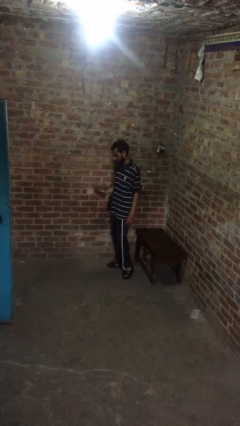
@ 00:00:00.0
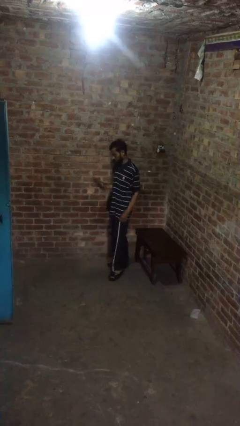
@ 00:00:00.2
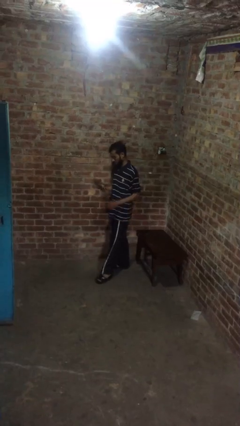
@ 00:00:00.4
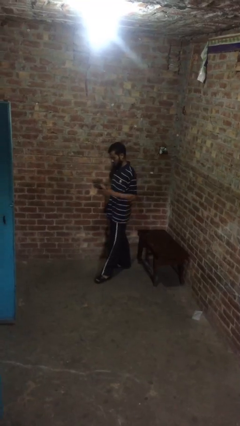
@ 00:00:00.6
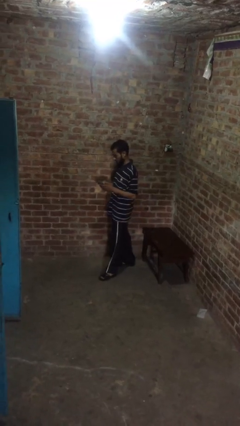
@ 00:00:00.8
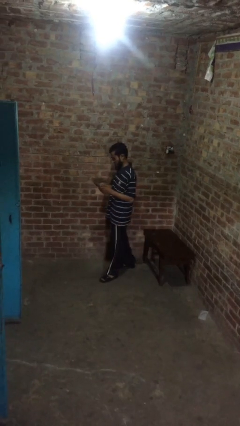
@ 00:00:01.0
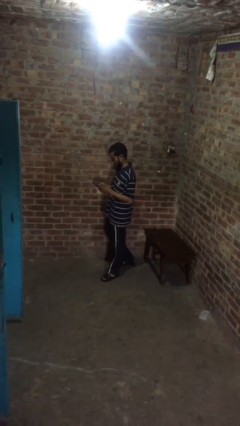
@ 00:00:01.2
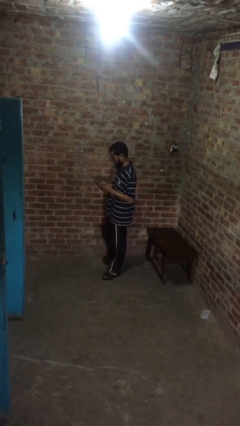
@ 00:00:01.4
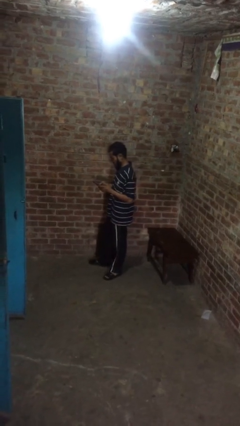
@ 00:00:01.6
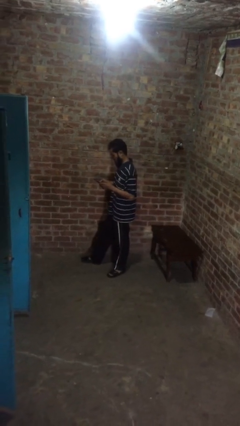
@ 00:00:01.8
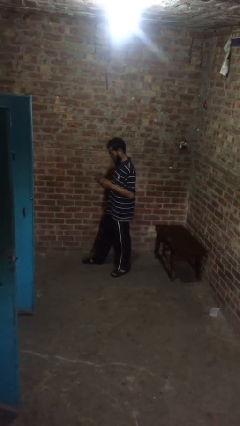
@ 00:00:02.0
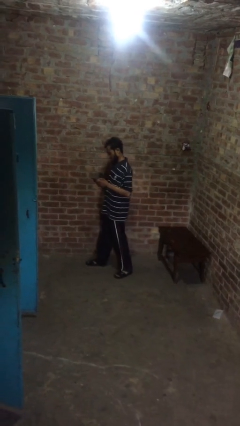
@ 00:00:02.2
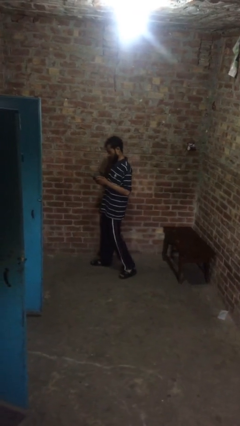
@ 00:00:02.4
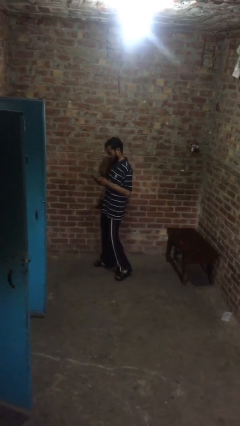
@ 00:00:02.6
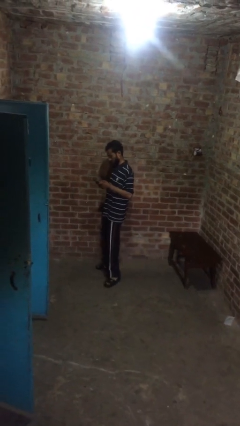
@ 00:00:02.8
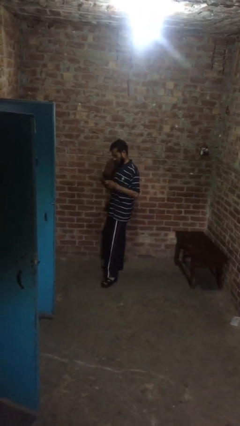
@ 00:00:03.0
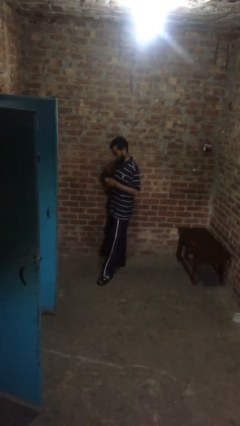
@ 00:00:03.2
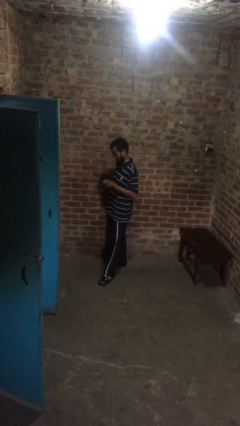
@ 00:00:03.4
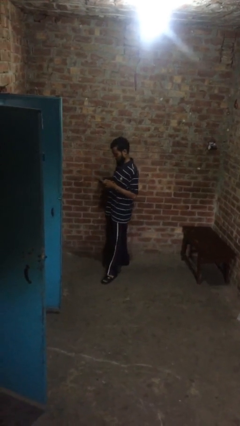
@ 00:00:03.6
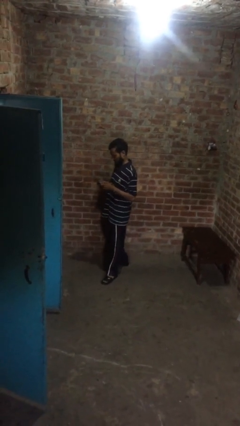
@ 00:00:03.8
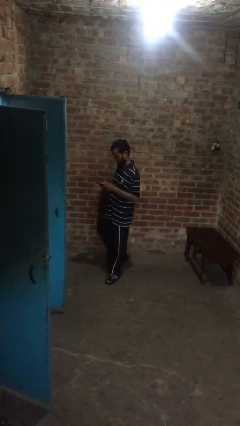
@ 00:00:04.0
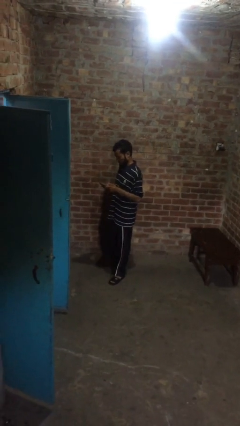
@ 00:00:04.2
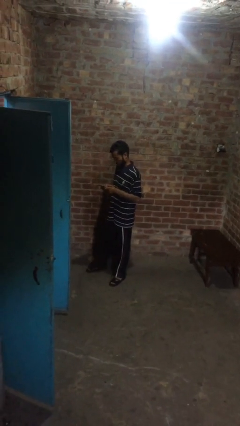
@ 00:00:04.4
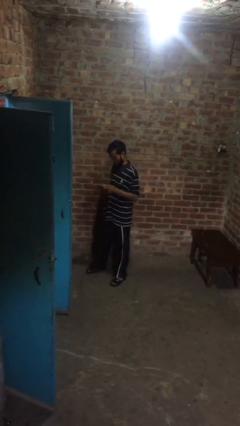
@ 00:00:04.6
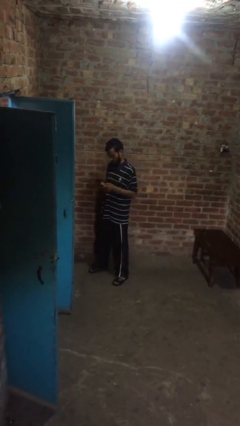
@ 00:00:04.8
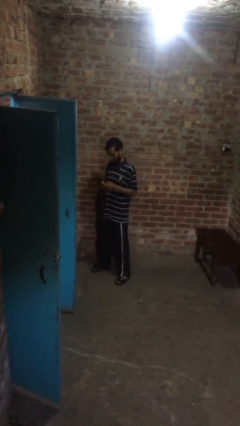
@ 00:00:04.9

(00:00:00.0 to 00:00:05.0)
person texts on phone

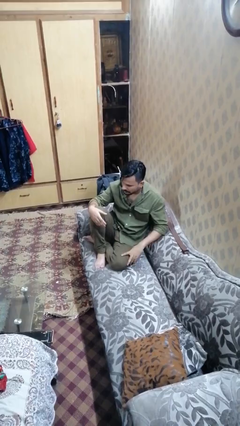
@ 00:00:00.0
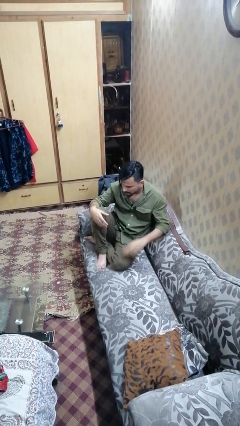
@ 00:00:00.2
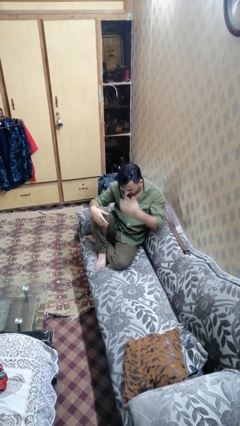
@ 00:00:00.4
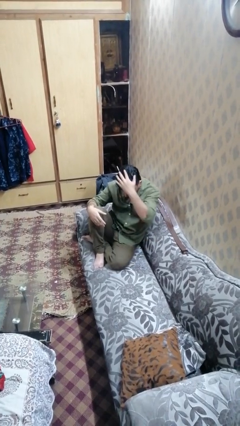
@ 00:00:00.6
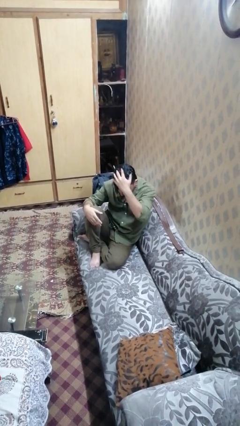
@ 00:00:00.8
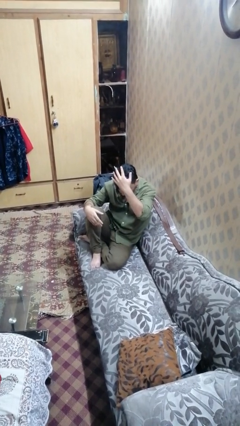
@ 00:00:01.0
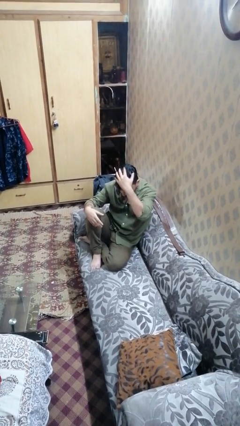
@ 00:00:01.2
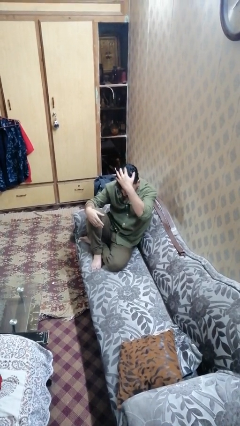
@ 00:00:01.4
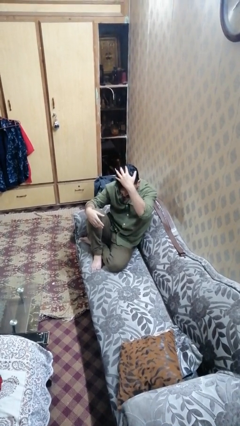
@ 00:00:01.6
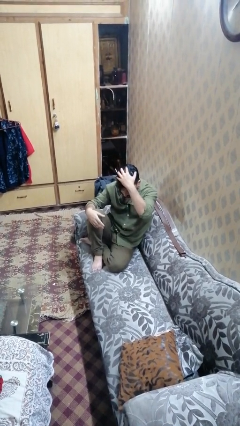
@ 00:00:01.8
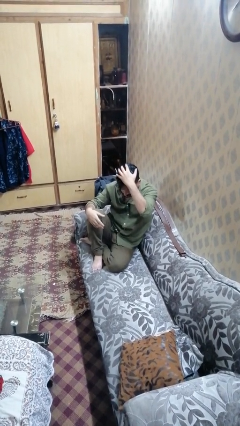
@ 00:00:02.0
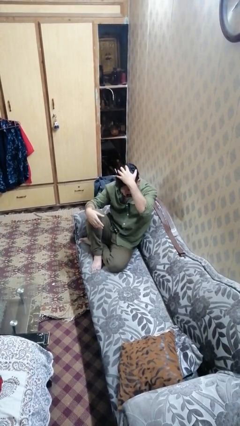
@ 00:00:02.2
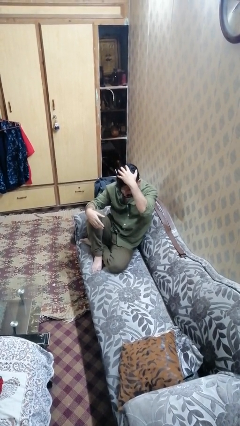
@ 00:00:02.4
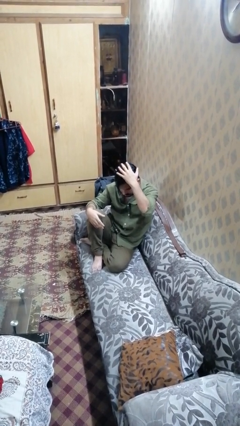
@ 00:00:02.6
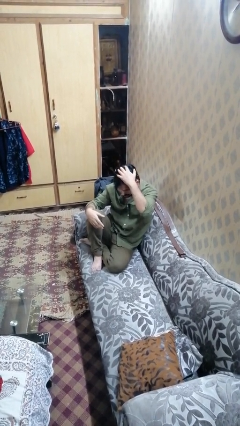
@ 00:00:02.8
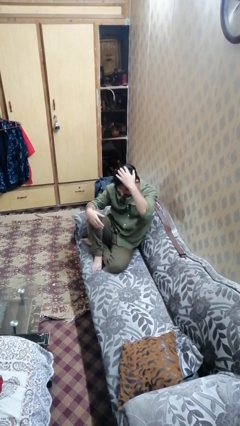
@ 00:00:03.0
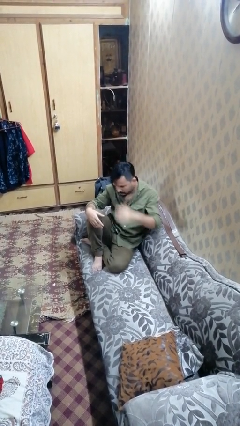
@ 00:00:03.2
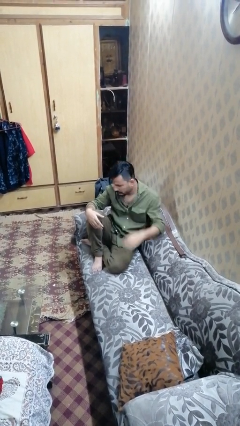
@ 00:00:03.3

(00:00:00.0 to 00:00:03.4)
person pats head

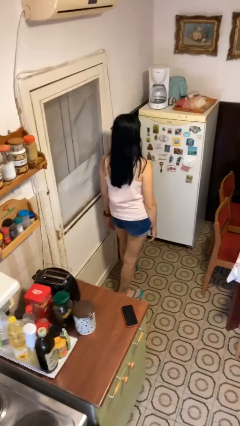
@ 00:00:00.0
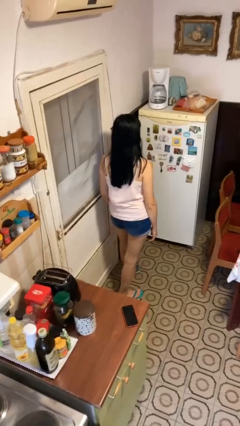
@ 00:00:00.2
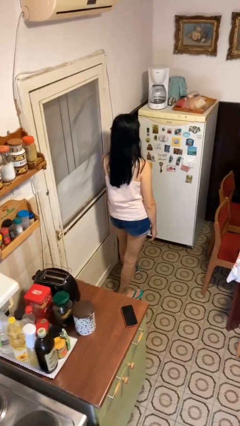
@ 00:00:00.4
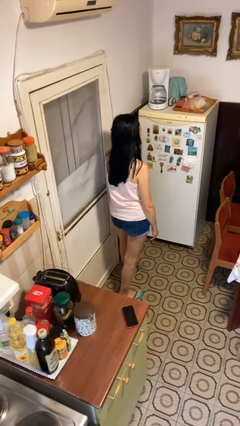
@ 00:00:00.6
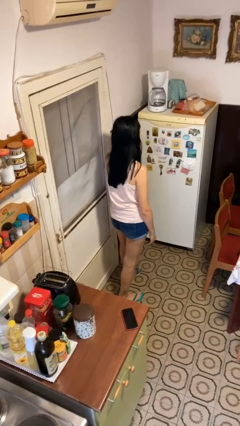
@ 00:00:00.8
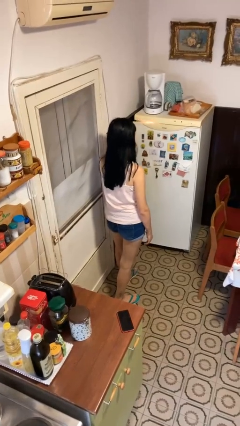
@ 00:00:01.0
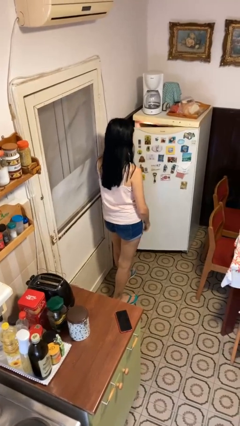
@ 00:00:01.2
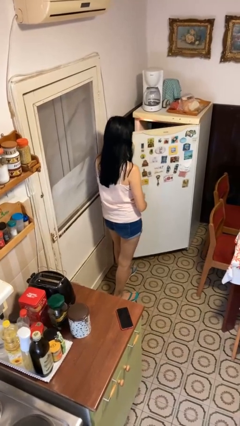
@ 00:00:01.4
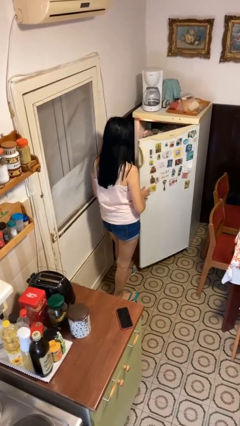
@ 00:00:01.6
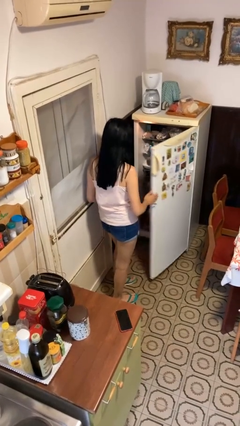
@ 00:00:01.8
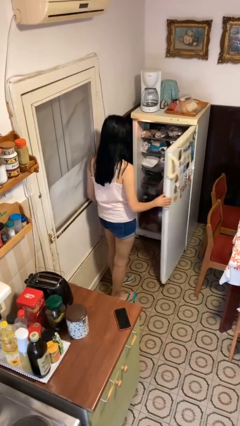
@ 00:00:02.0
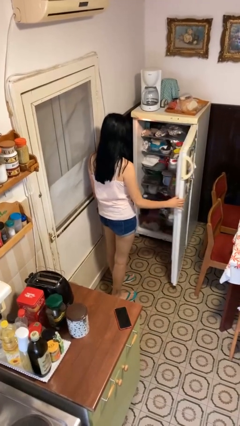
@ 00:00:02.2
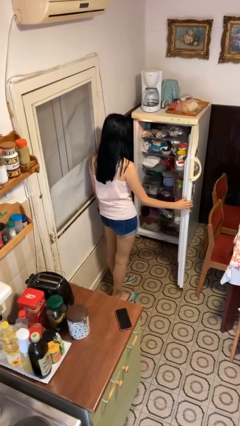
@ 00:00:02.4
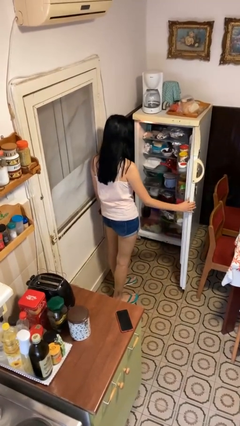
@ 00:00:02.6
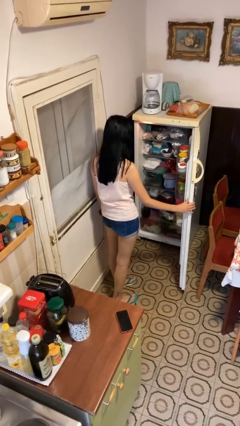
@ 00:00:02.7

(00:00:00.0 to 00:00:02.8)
person opens refrigerator

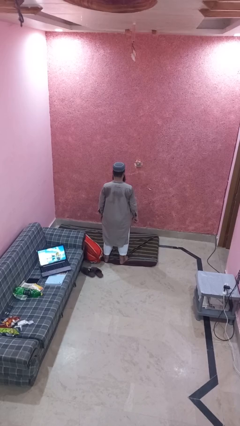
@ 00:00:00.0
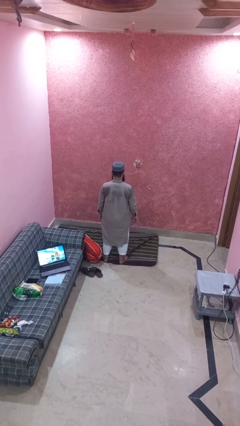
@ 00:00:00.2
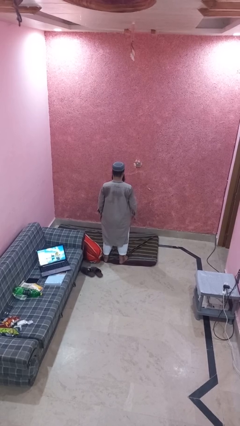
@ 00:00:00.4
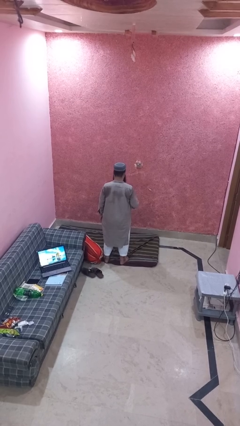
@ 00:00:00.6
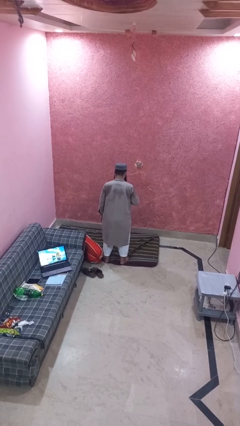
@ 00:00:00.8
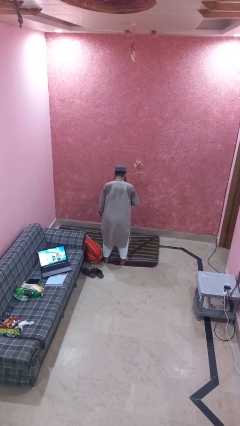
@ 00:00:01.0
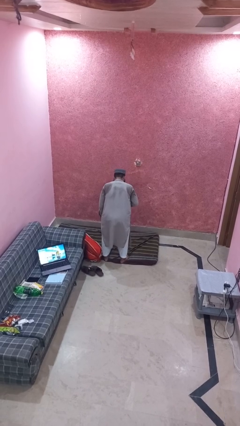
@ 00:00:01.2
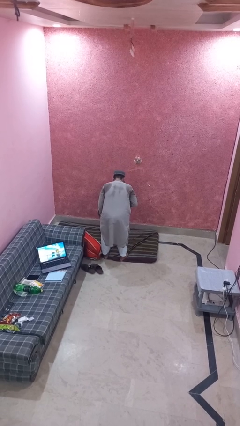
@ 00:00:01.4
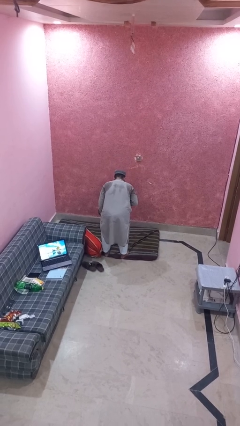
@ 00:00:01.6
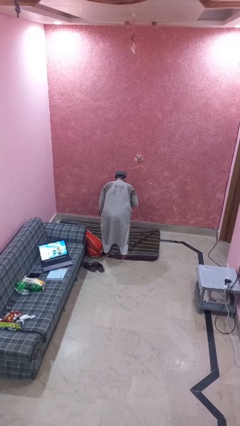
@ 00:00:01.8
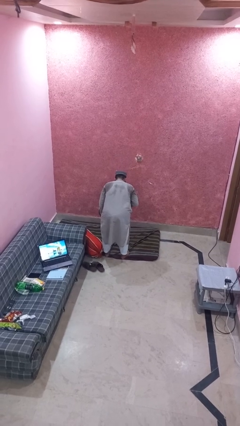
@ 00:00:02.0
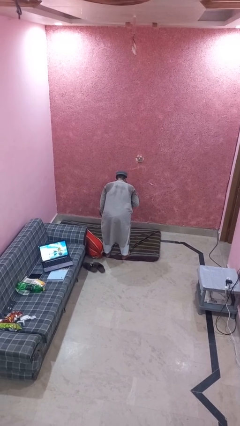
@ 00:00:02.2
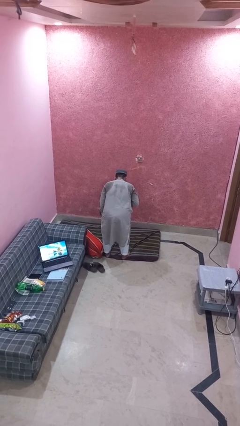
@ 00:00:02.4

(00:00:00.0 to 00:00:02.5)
person bows

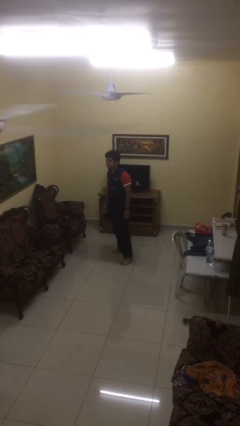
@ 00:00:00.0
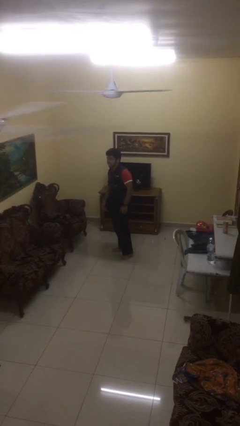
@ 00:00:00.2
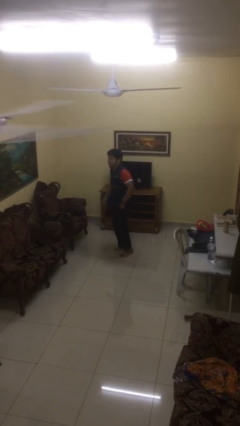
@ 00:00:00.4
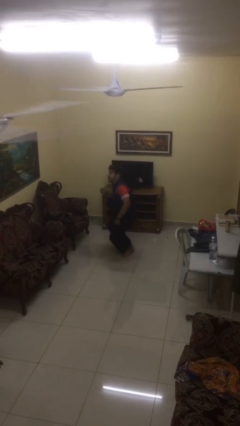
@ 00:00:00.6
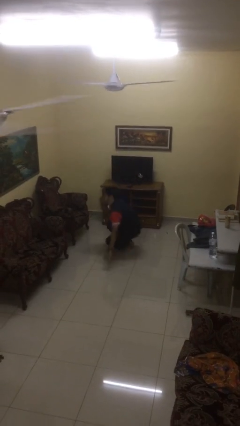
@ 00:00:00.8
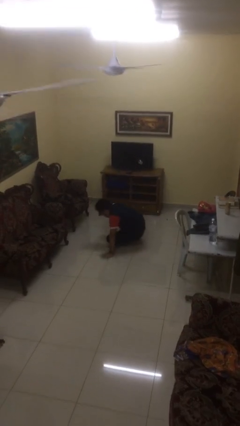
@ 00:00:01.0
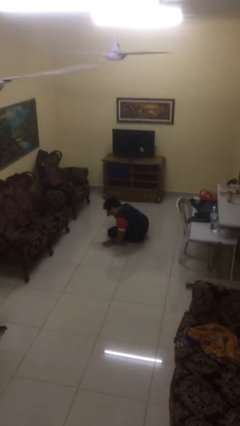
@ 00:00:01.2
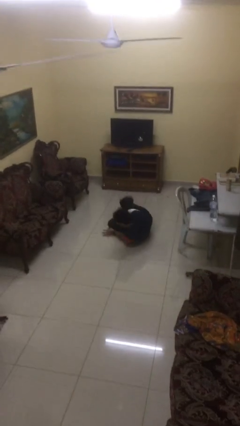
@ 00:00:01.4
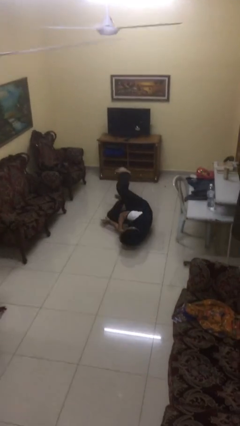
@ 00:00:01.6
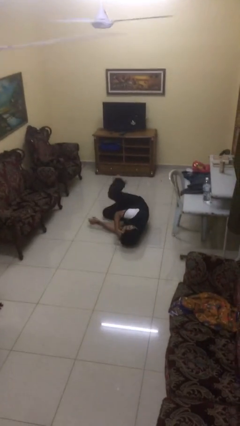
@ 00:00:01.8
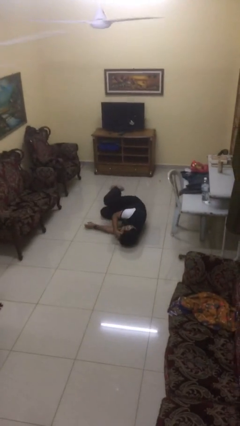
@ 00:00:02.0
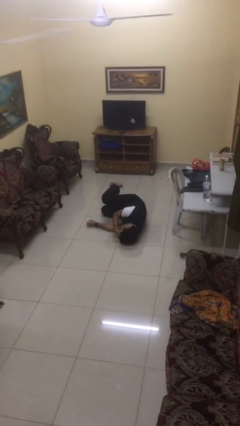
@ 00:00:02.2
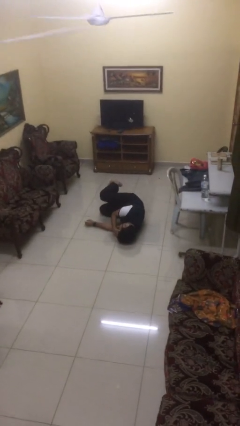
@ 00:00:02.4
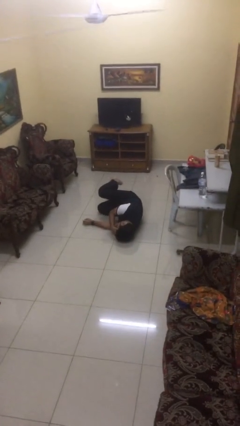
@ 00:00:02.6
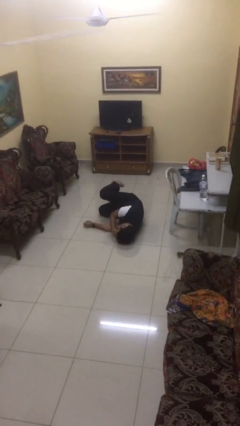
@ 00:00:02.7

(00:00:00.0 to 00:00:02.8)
person falls while standing

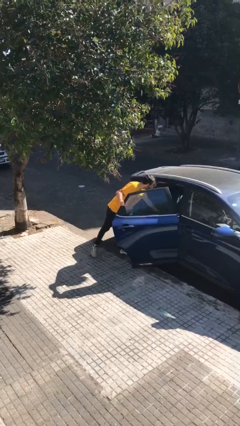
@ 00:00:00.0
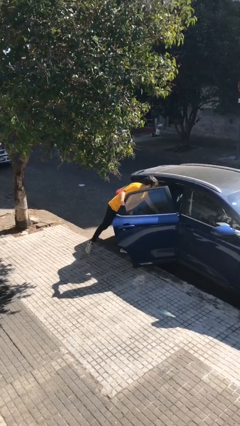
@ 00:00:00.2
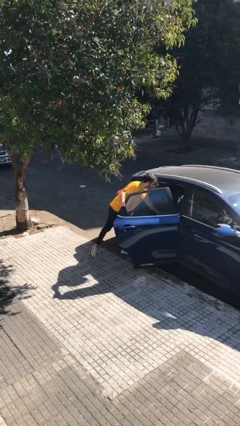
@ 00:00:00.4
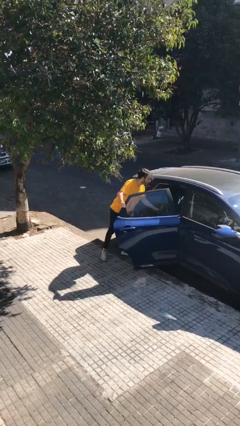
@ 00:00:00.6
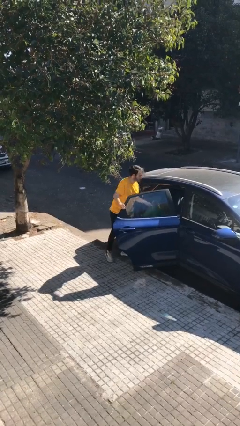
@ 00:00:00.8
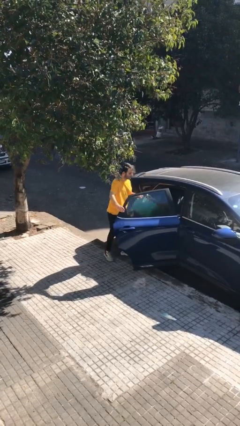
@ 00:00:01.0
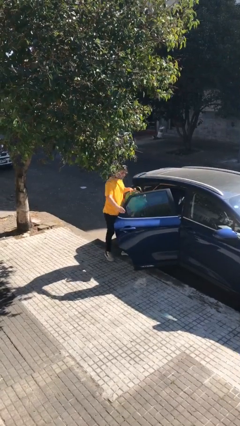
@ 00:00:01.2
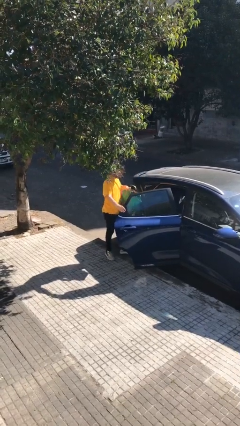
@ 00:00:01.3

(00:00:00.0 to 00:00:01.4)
person unloads car
